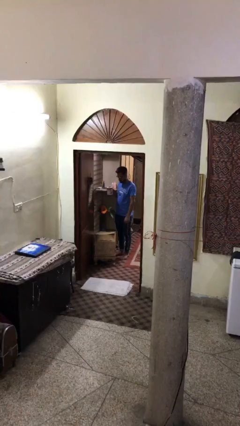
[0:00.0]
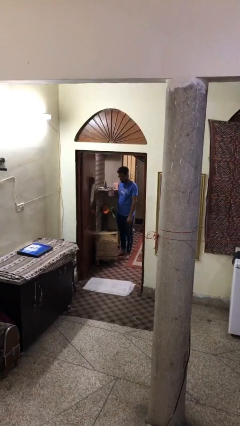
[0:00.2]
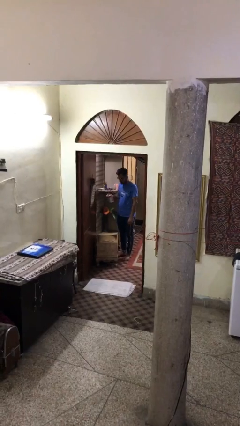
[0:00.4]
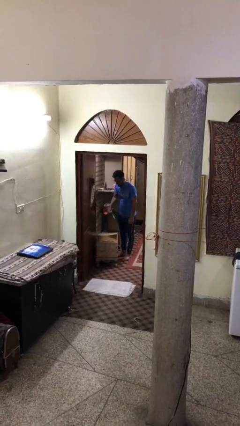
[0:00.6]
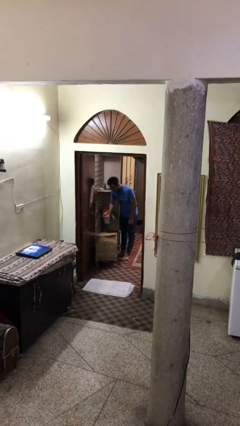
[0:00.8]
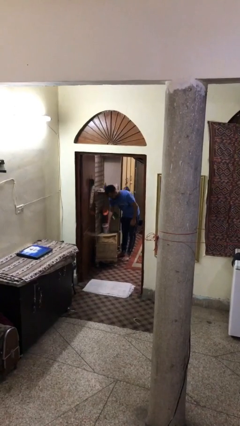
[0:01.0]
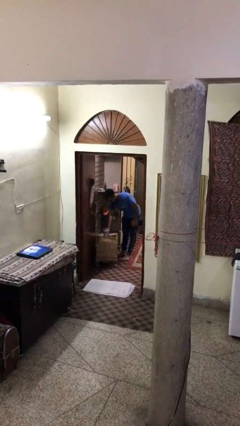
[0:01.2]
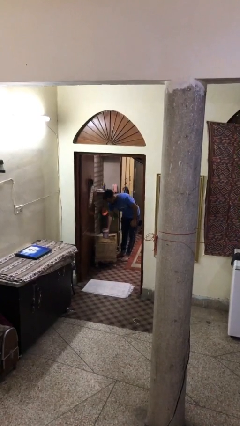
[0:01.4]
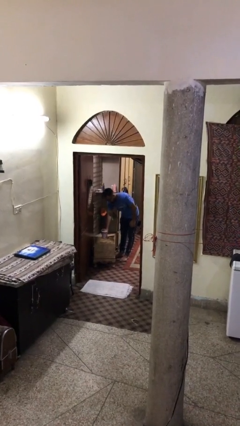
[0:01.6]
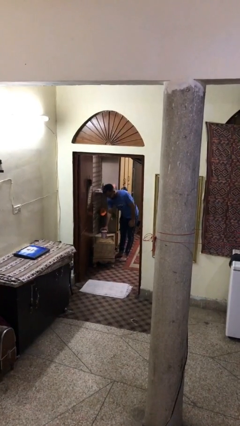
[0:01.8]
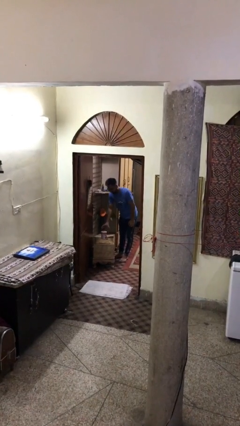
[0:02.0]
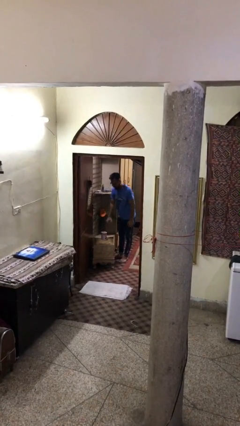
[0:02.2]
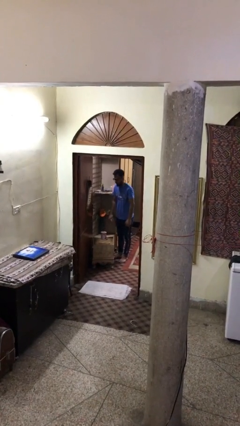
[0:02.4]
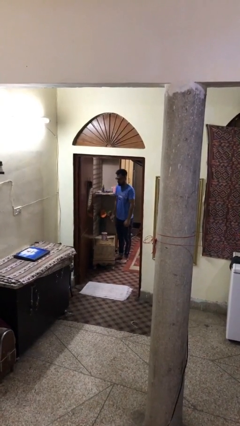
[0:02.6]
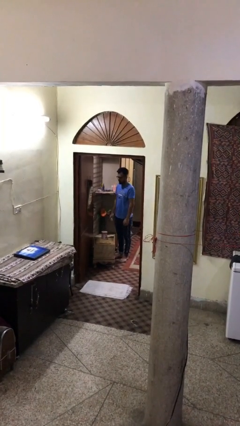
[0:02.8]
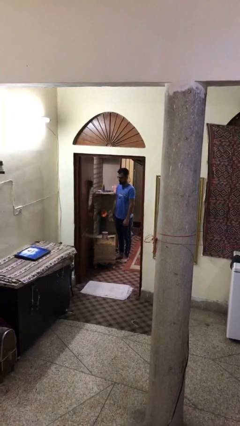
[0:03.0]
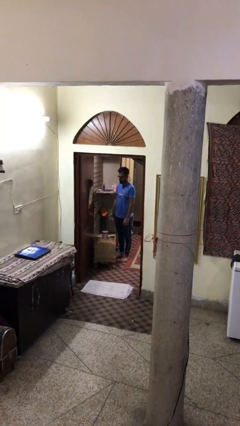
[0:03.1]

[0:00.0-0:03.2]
person puts down object on table

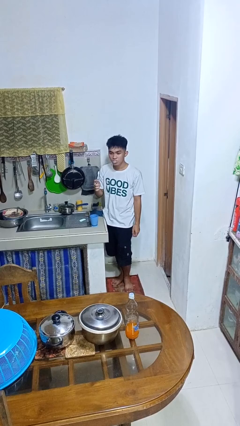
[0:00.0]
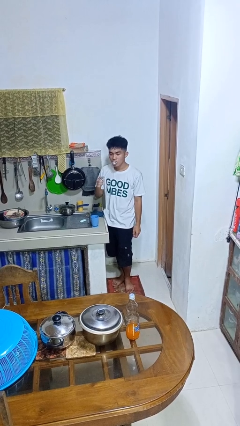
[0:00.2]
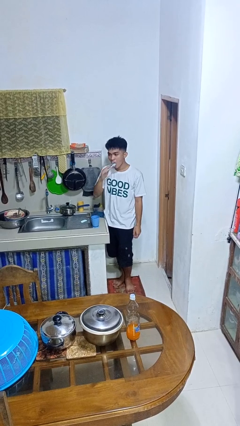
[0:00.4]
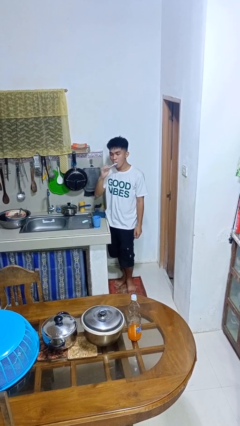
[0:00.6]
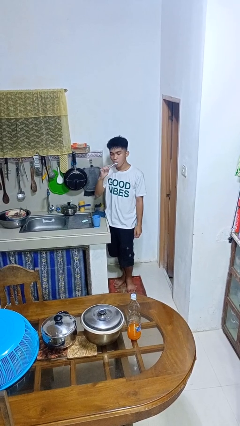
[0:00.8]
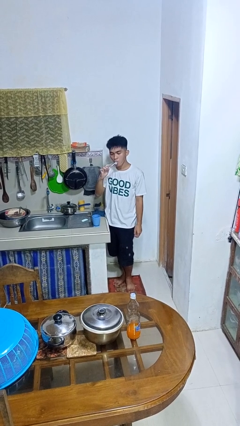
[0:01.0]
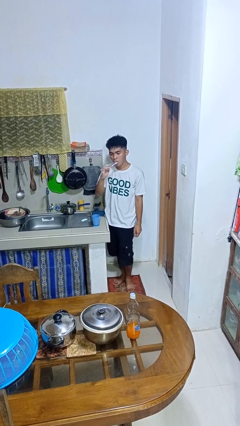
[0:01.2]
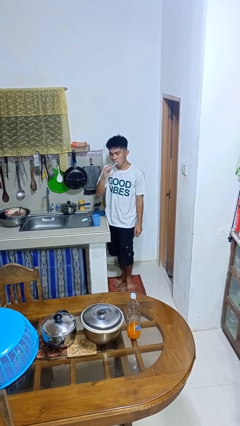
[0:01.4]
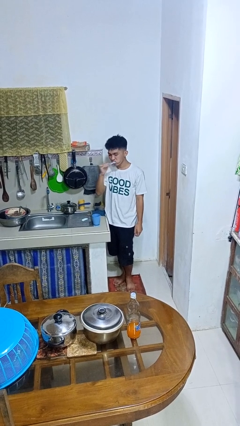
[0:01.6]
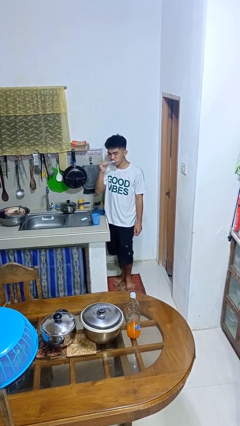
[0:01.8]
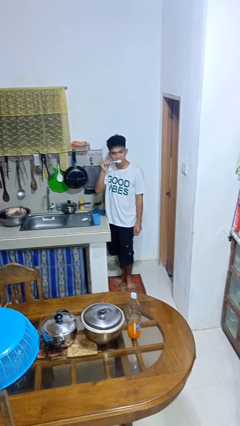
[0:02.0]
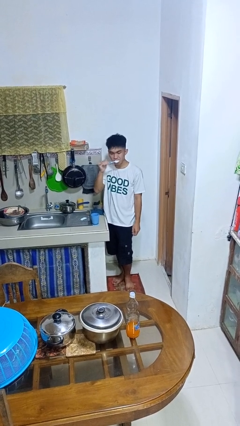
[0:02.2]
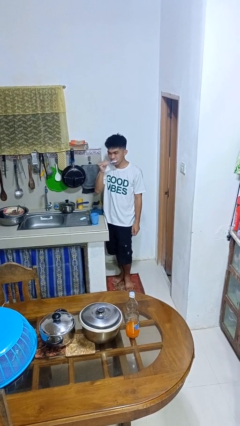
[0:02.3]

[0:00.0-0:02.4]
person brushes teeth

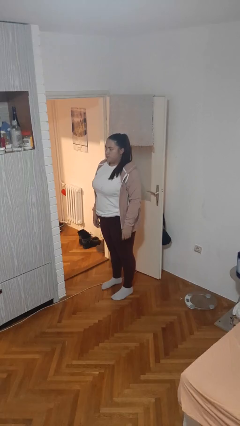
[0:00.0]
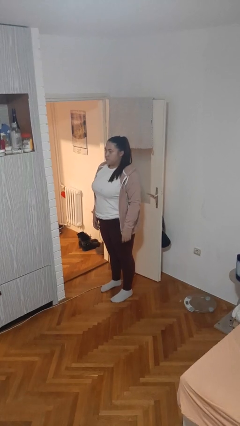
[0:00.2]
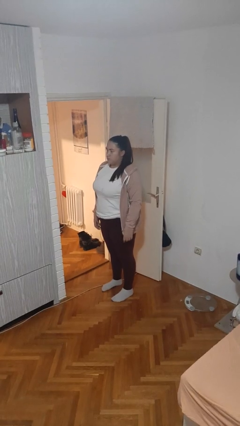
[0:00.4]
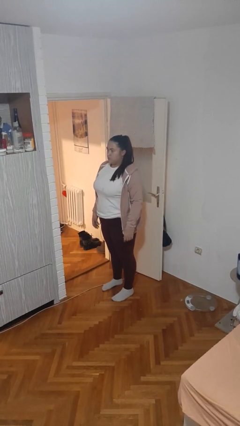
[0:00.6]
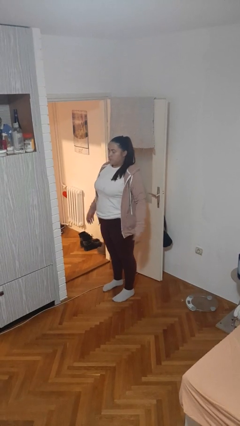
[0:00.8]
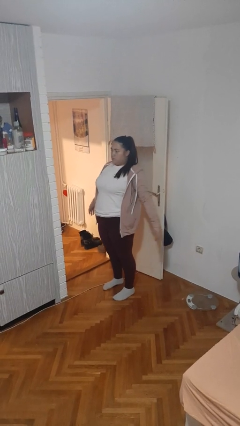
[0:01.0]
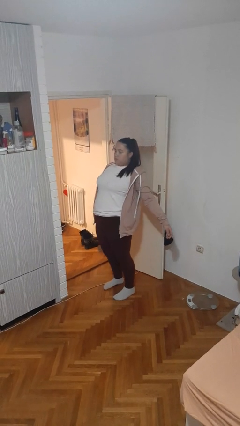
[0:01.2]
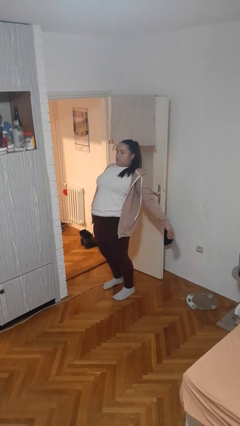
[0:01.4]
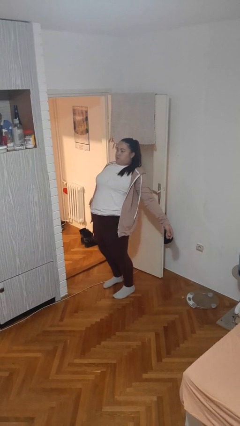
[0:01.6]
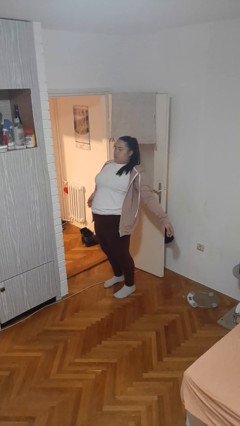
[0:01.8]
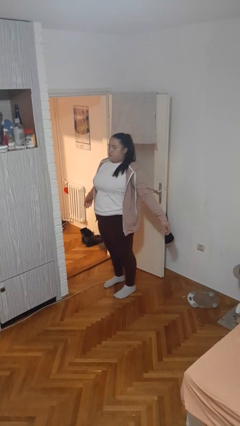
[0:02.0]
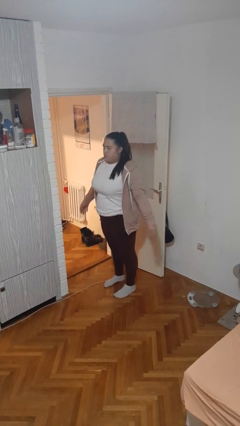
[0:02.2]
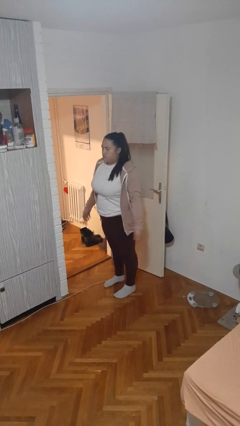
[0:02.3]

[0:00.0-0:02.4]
person stretches back

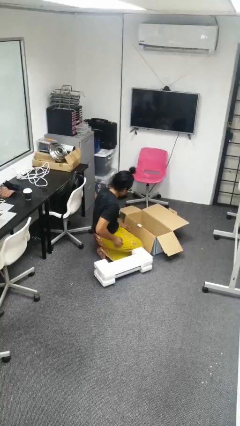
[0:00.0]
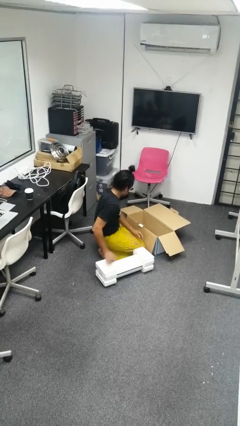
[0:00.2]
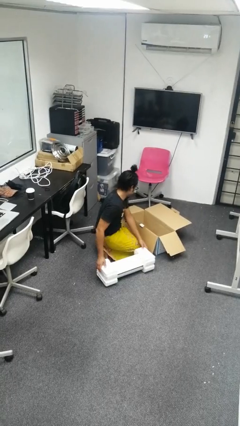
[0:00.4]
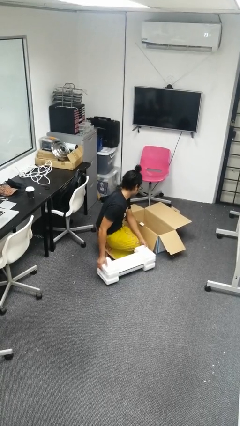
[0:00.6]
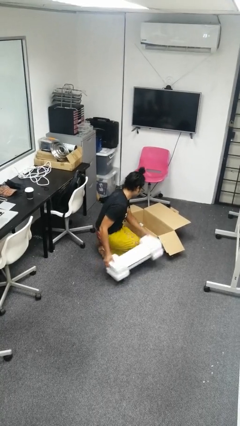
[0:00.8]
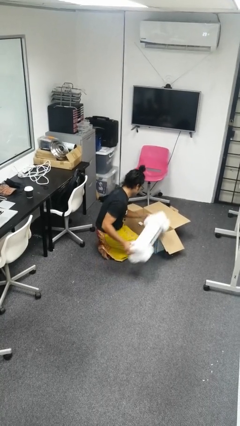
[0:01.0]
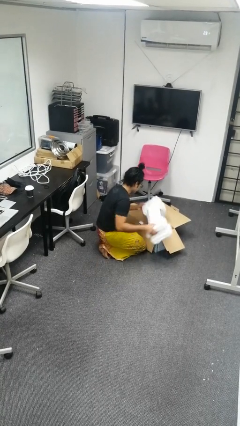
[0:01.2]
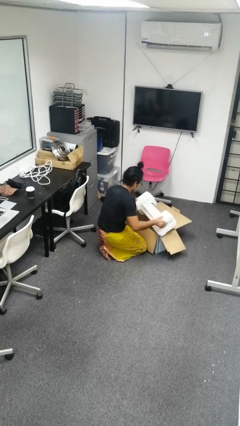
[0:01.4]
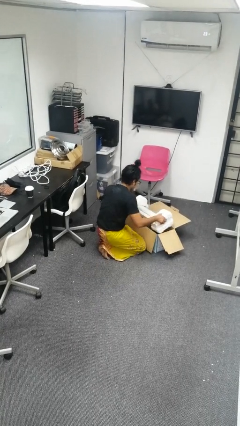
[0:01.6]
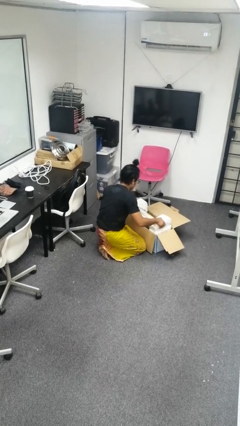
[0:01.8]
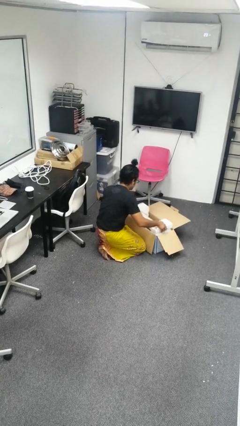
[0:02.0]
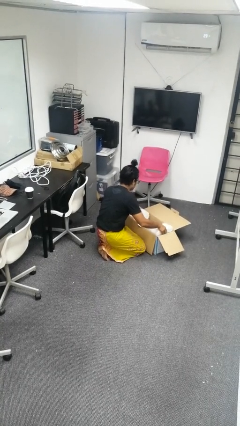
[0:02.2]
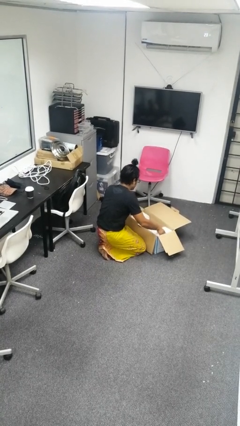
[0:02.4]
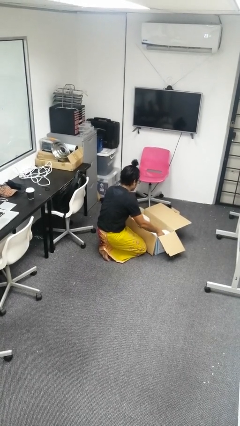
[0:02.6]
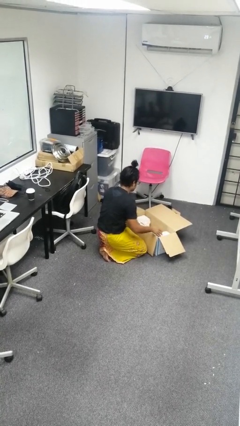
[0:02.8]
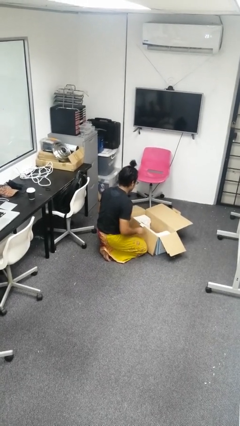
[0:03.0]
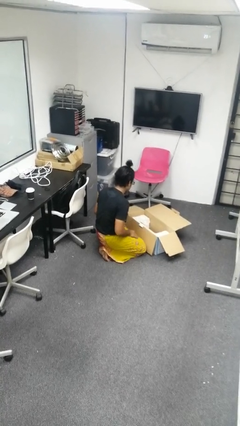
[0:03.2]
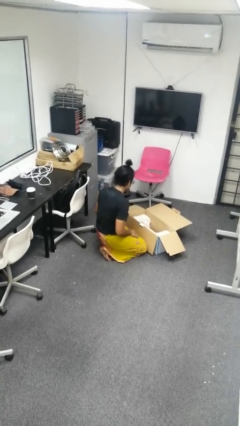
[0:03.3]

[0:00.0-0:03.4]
person puts object into box

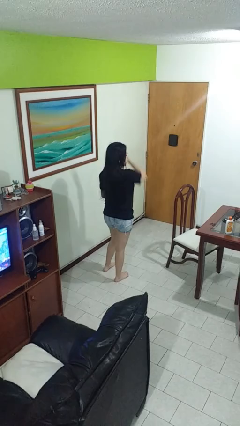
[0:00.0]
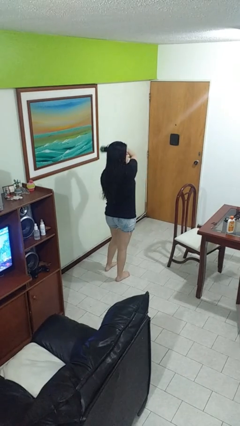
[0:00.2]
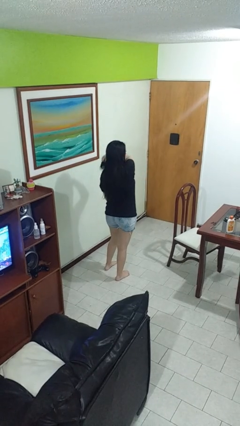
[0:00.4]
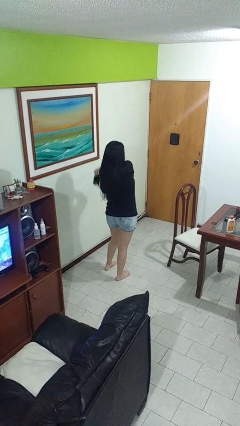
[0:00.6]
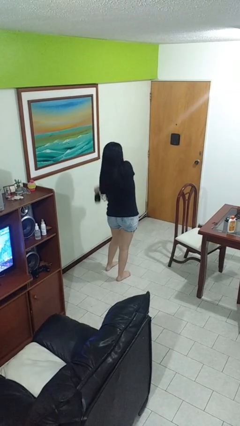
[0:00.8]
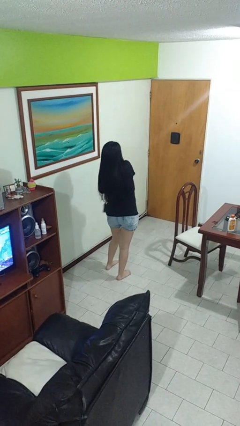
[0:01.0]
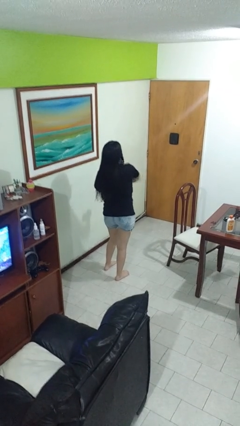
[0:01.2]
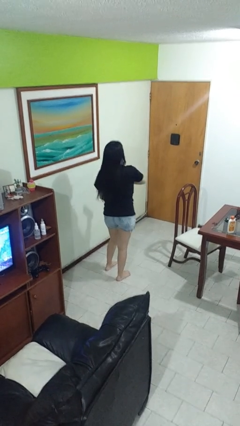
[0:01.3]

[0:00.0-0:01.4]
person brushes hair

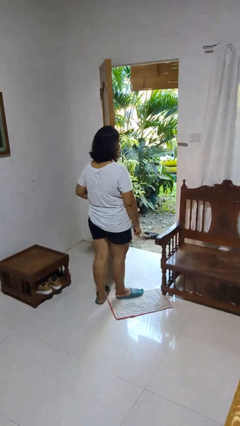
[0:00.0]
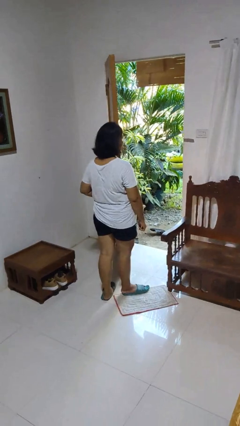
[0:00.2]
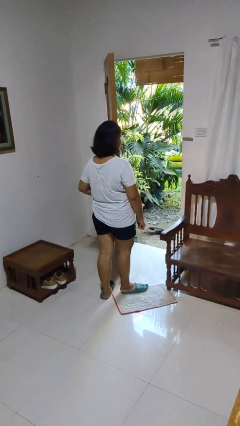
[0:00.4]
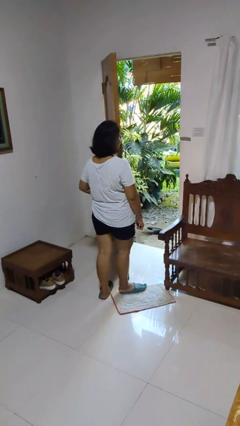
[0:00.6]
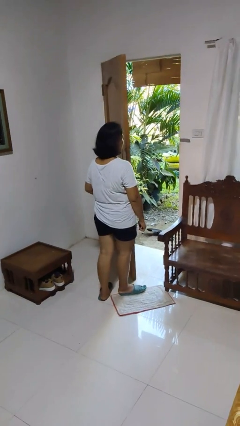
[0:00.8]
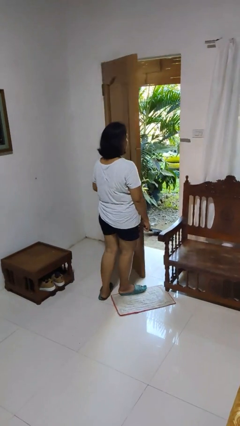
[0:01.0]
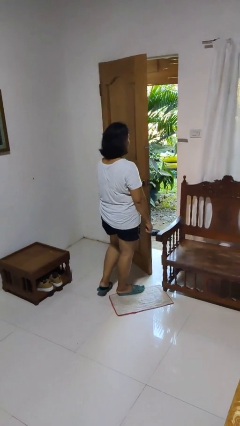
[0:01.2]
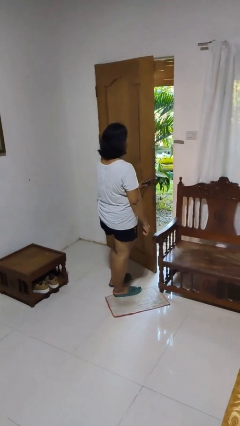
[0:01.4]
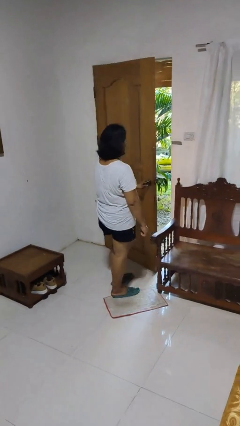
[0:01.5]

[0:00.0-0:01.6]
person closes facility door

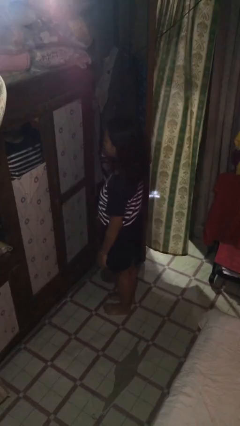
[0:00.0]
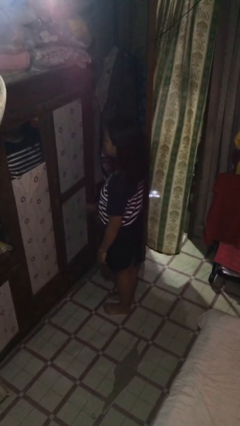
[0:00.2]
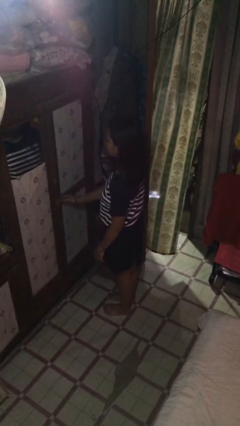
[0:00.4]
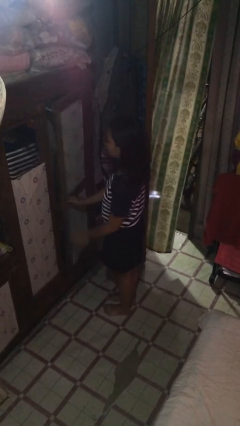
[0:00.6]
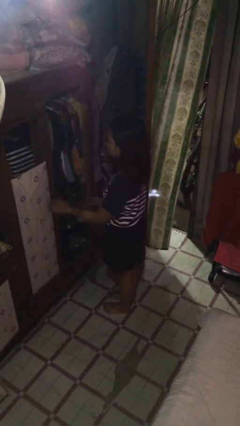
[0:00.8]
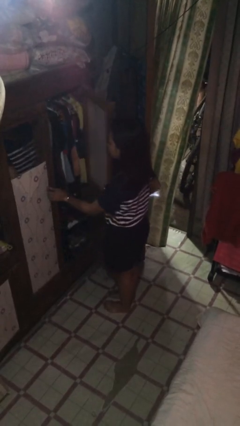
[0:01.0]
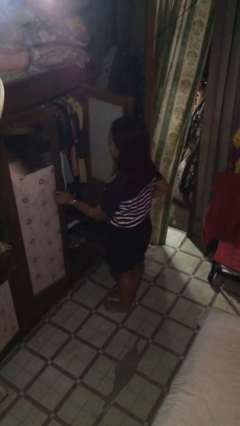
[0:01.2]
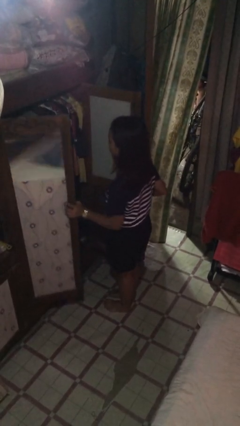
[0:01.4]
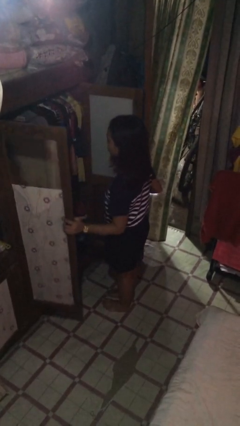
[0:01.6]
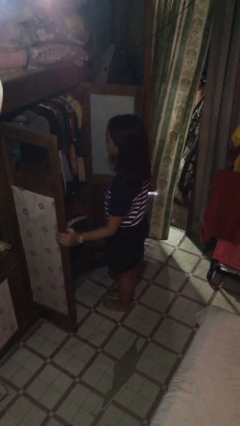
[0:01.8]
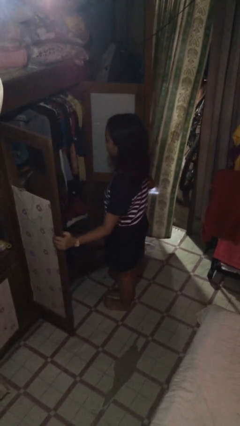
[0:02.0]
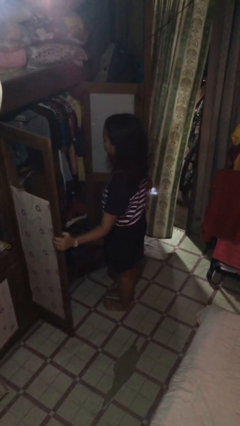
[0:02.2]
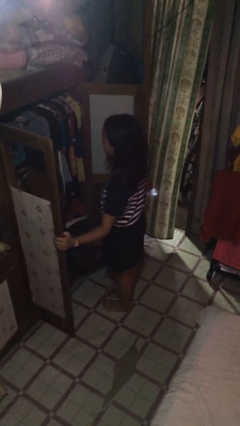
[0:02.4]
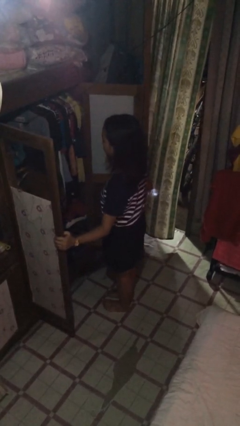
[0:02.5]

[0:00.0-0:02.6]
person opens closet door
